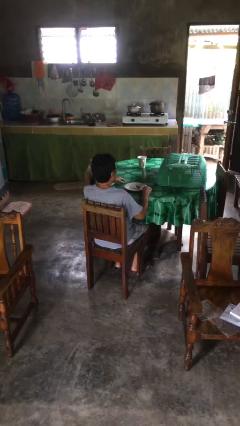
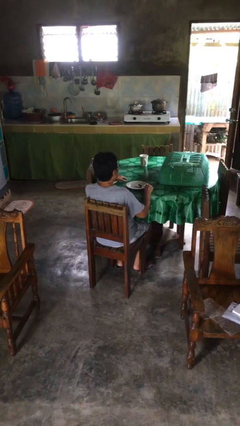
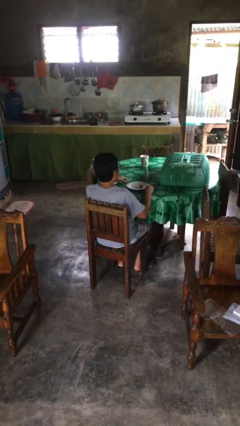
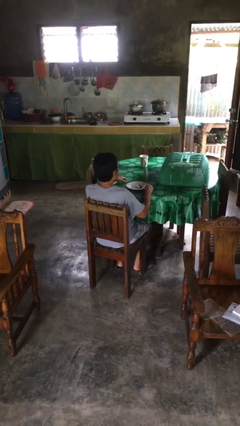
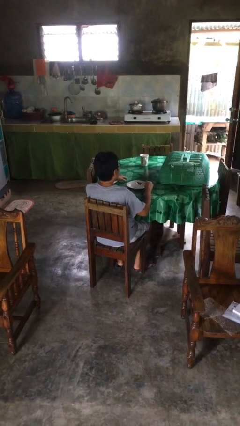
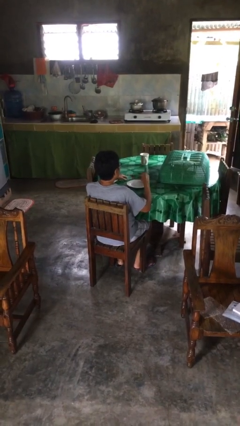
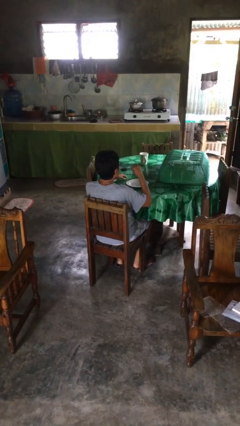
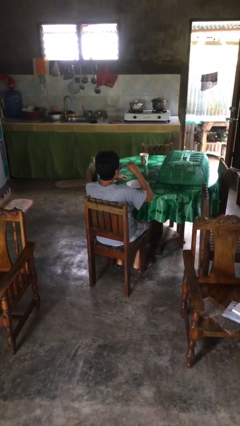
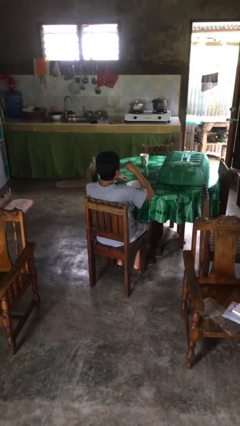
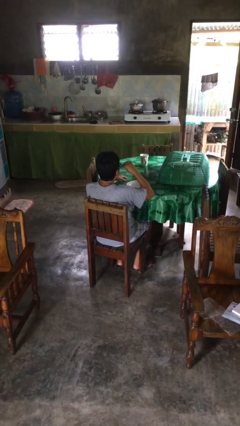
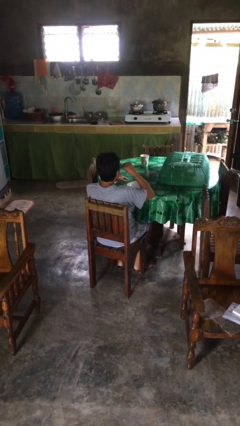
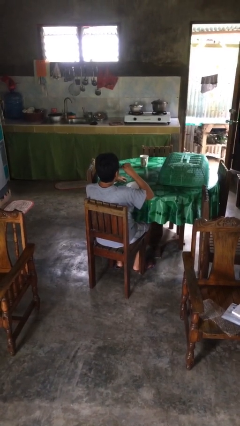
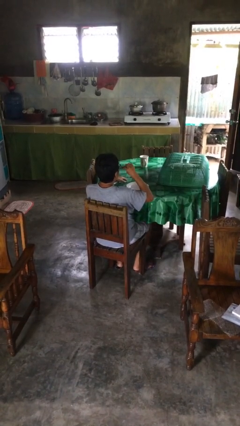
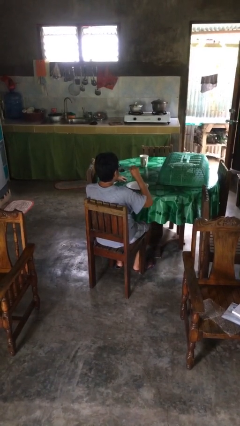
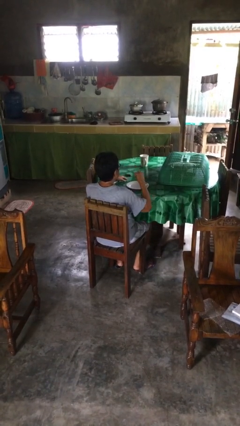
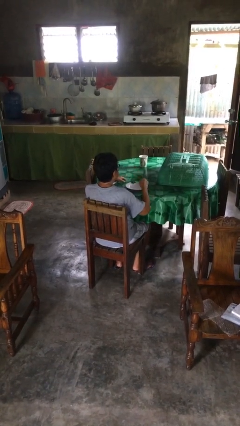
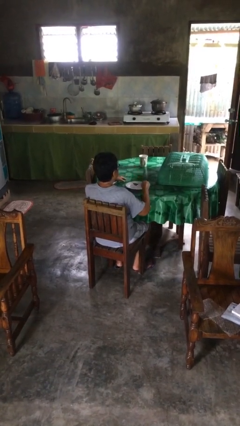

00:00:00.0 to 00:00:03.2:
person eats with utensil

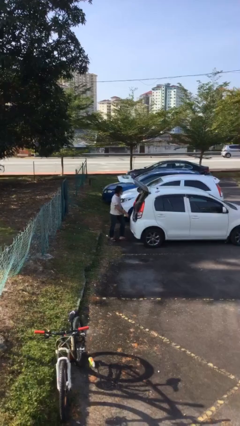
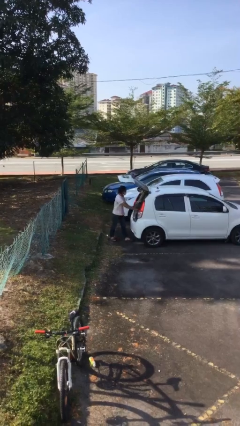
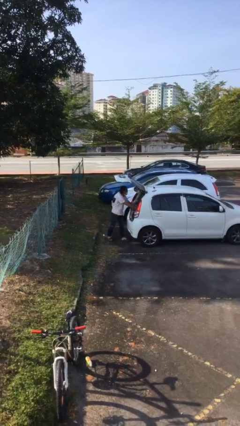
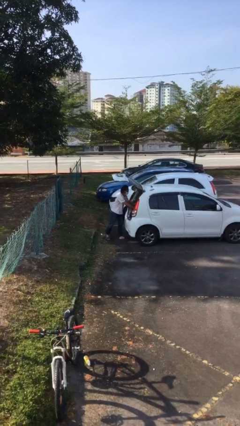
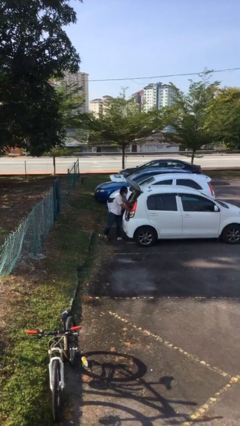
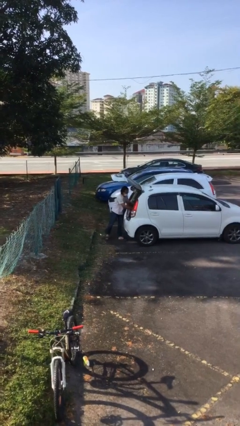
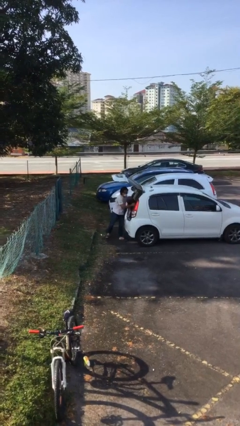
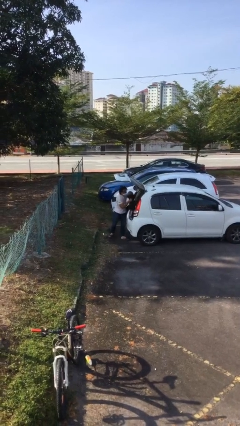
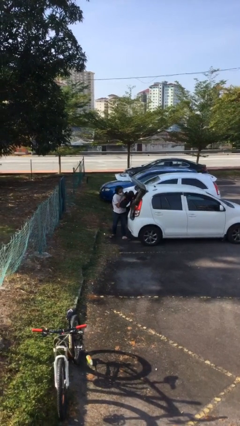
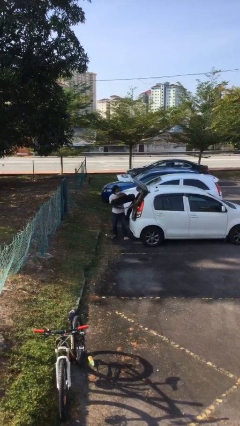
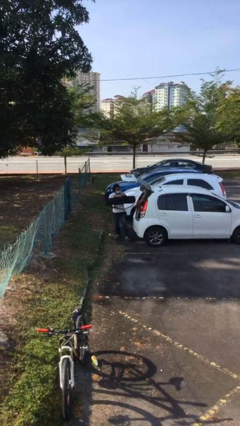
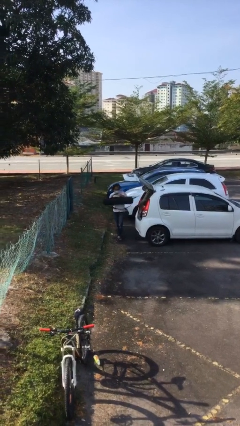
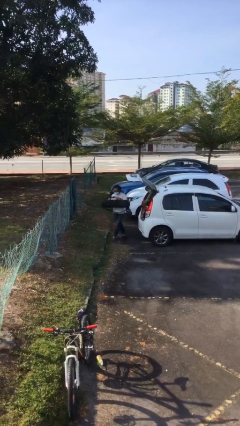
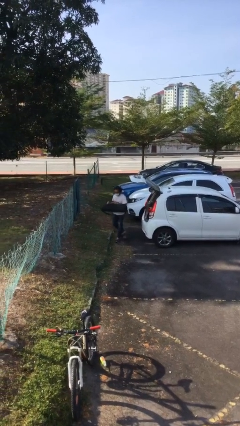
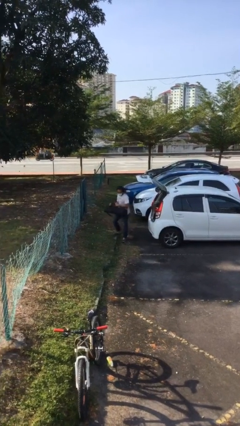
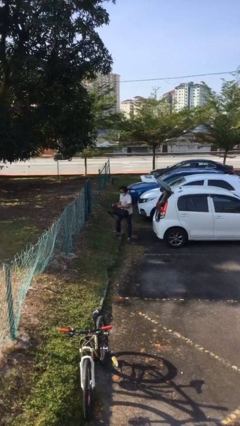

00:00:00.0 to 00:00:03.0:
person unloads car

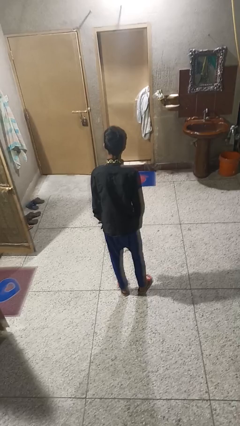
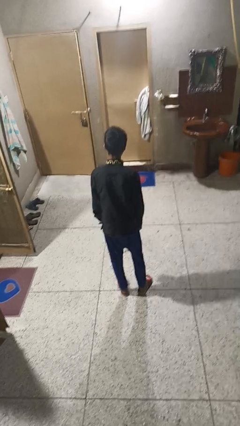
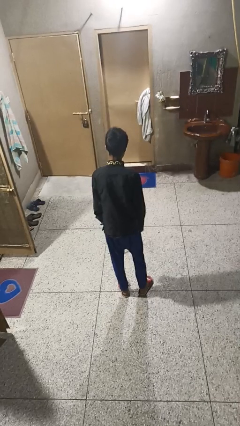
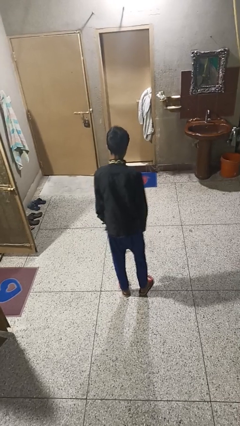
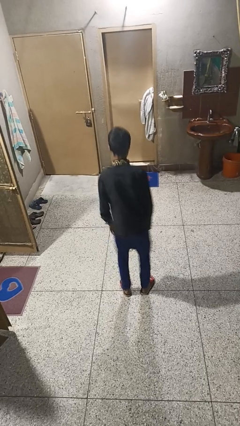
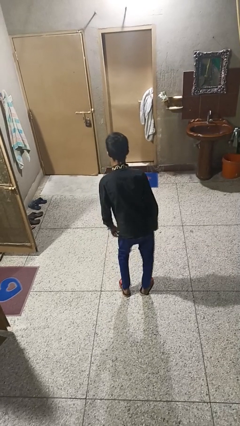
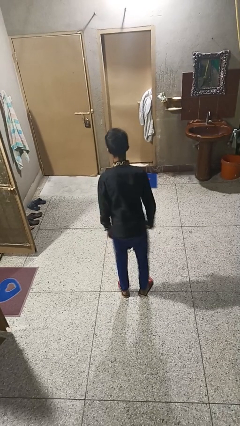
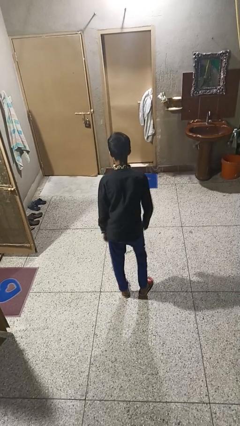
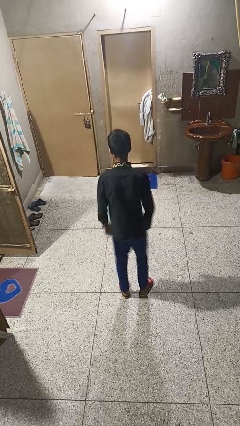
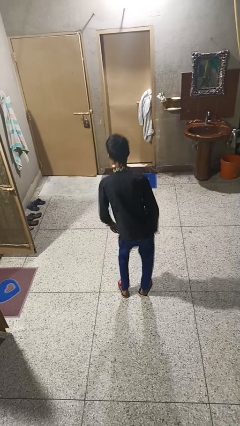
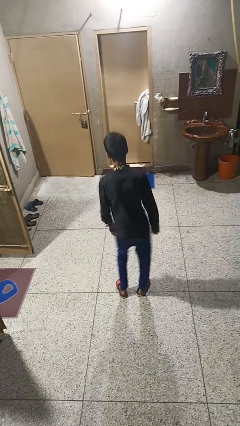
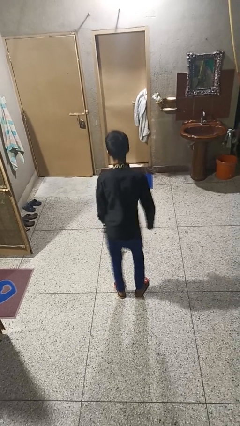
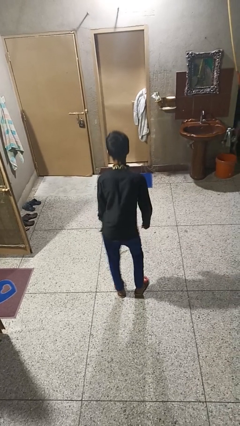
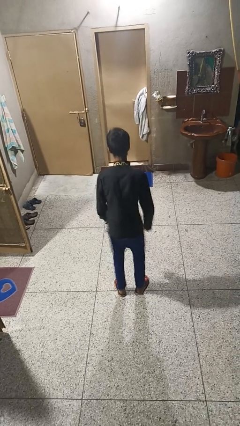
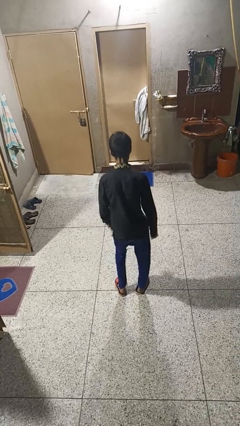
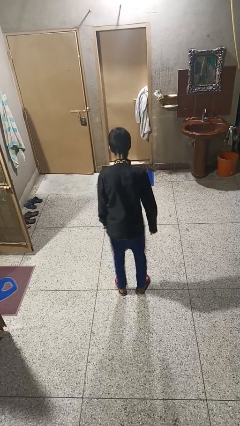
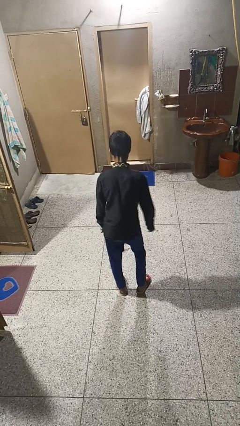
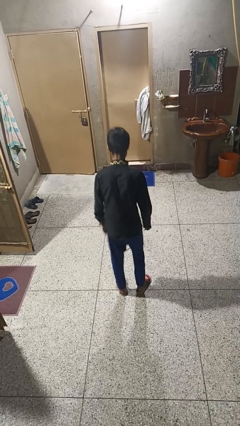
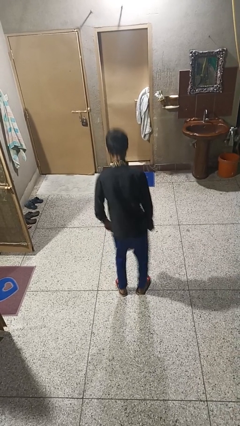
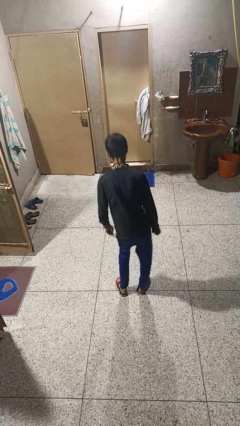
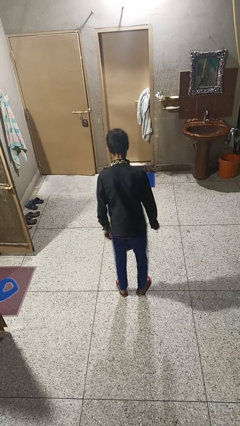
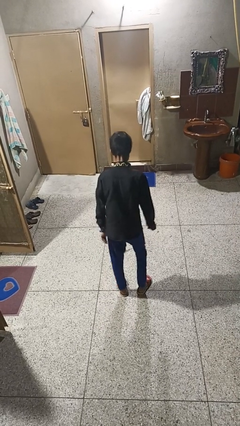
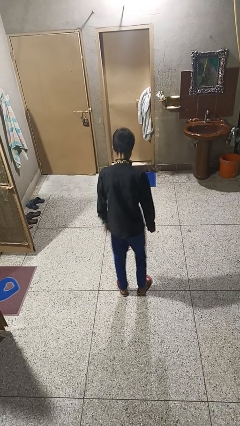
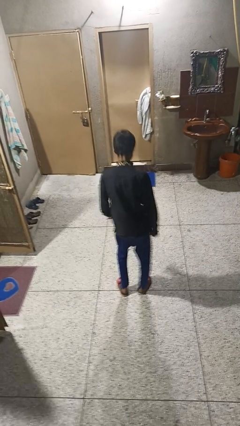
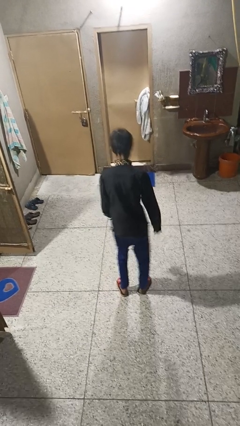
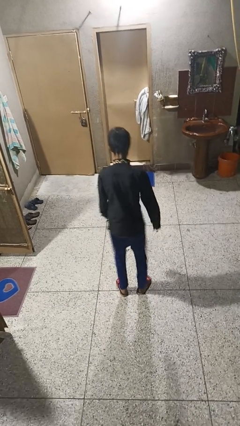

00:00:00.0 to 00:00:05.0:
person wiggles hips

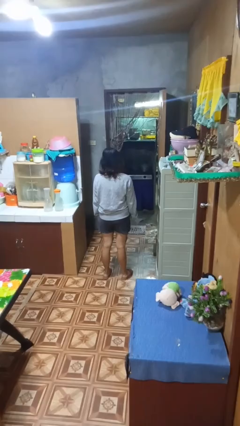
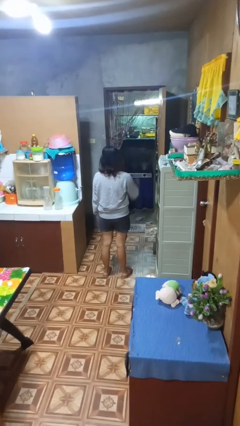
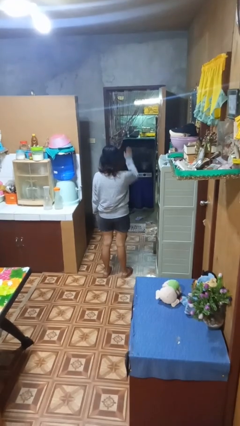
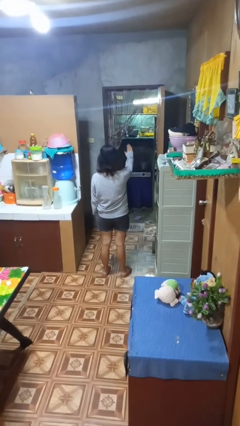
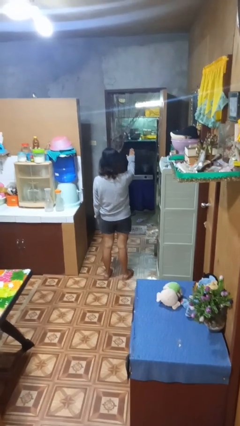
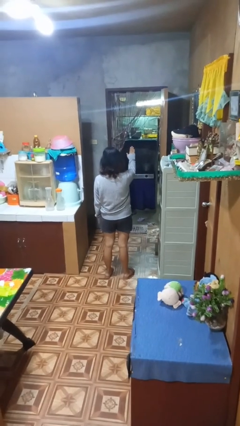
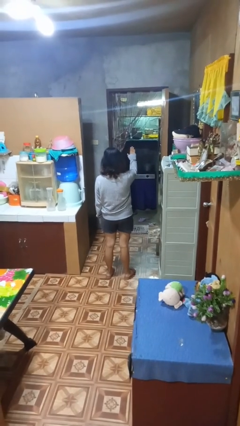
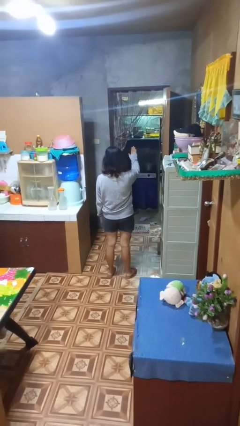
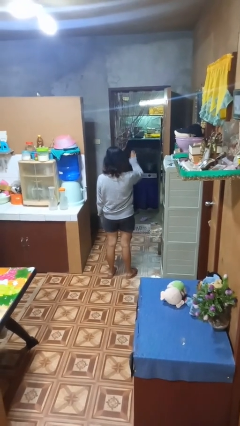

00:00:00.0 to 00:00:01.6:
person gestures stop

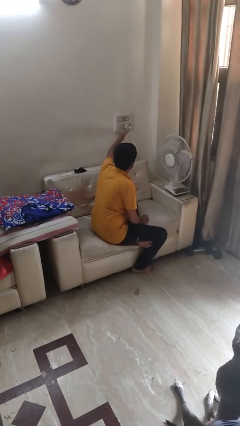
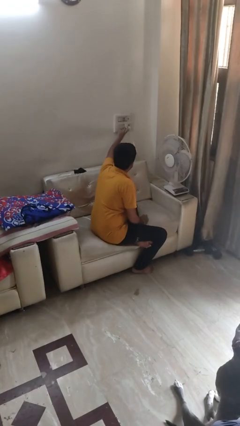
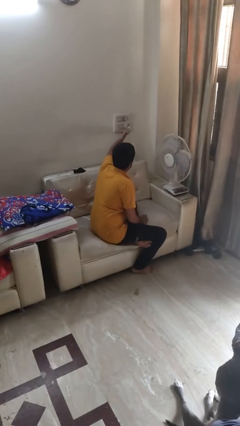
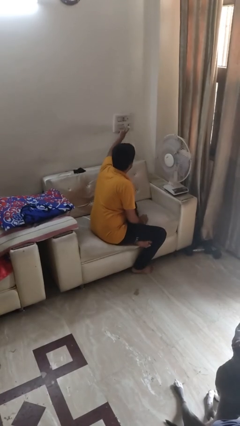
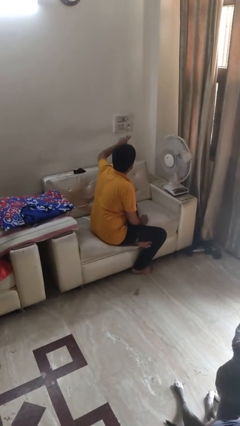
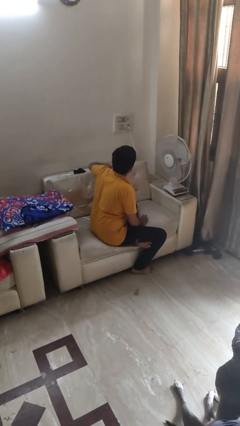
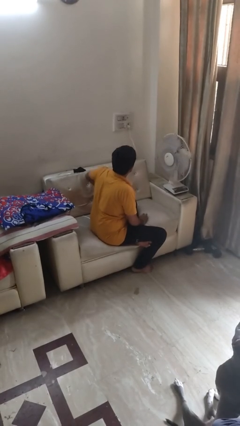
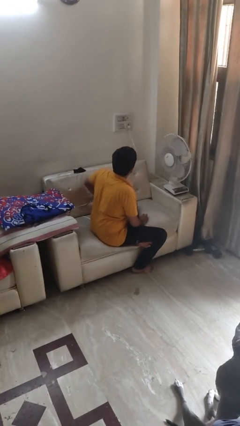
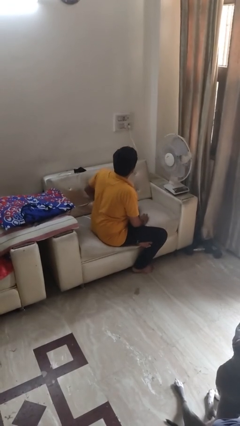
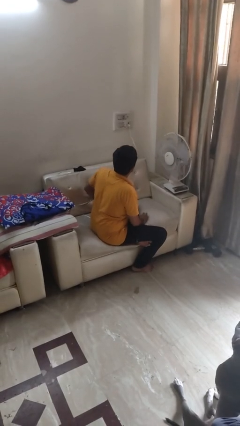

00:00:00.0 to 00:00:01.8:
person turns on fan

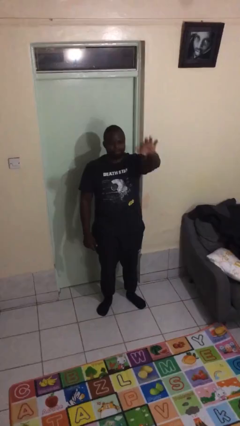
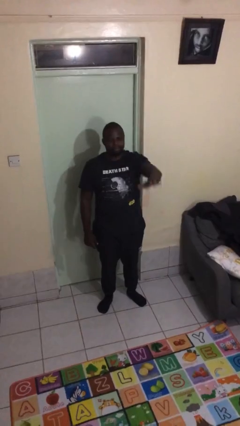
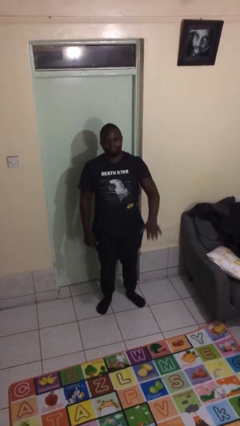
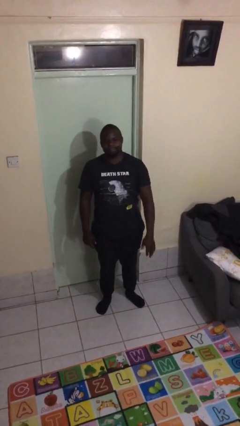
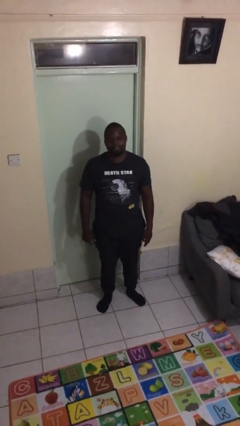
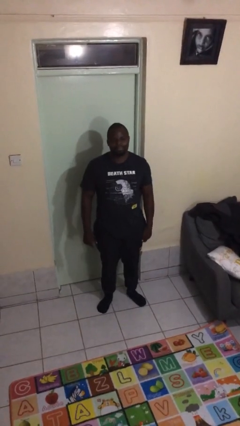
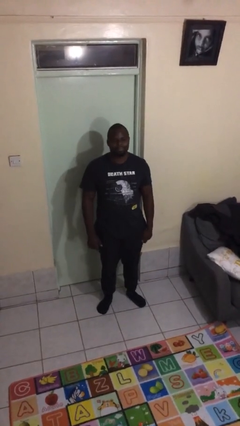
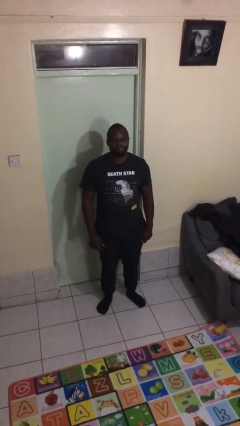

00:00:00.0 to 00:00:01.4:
person gestures swipe down

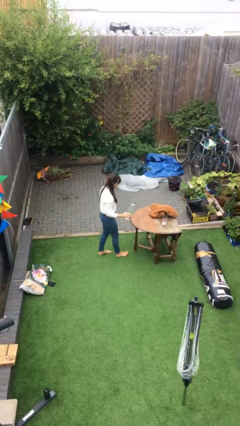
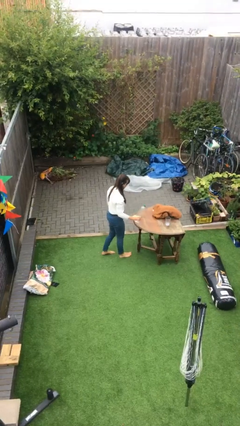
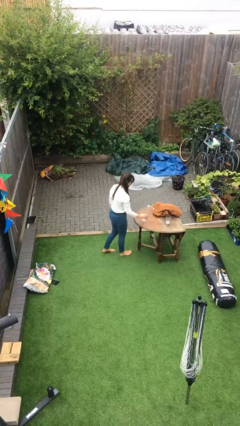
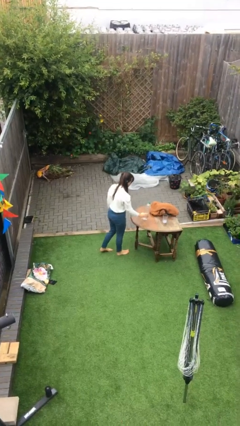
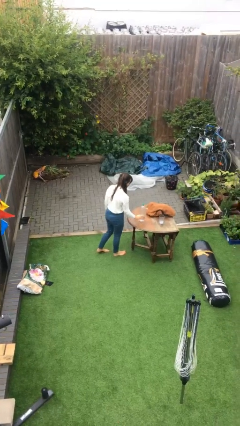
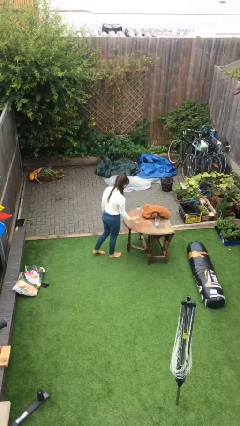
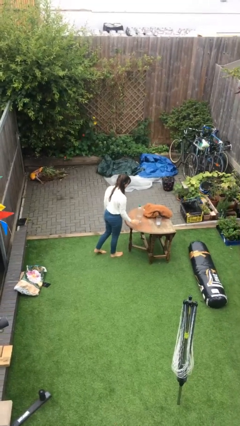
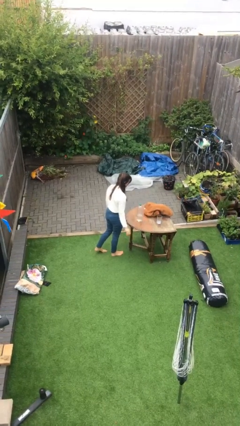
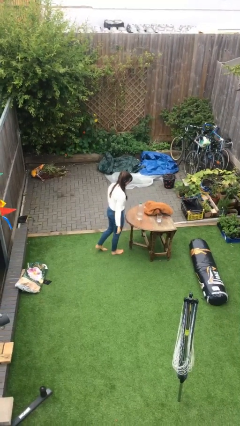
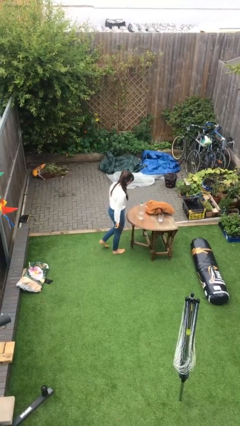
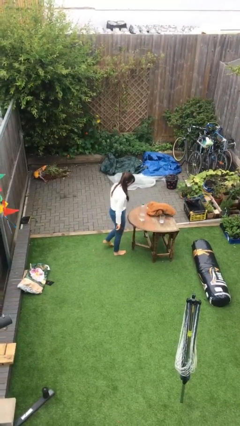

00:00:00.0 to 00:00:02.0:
person puts down object on table
